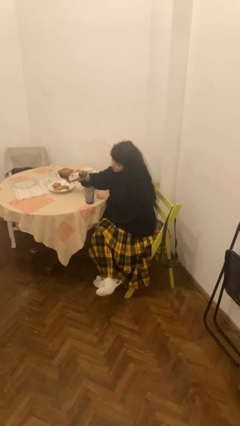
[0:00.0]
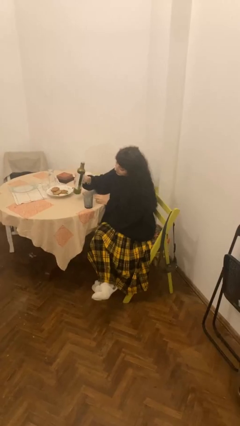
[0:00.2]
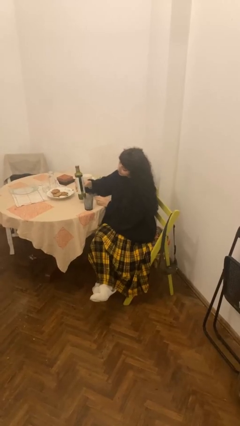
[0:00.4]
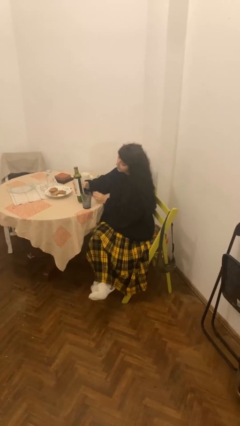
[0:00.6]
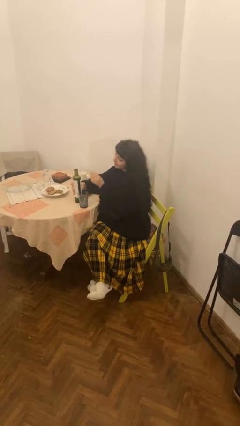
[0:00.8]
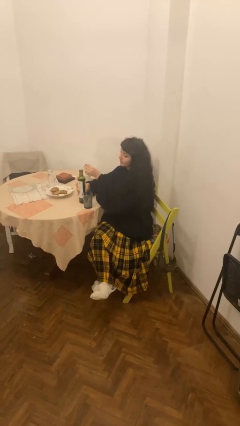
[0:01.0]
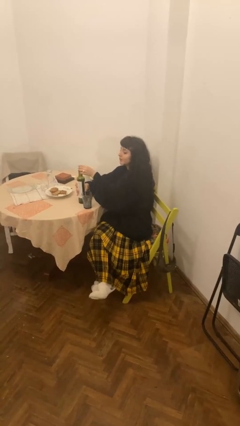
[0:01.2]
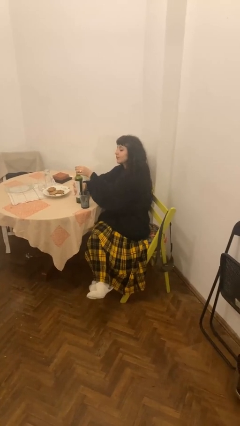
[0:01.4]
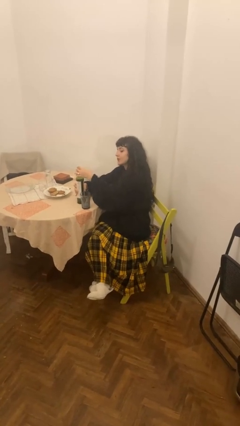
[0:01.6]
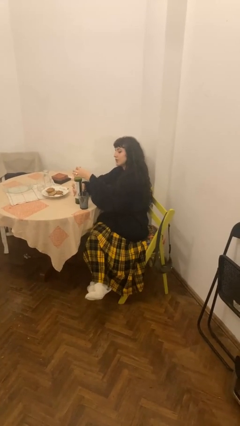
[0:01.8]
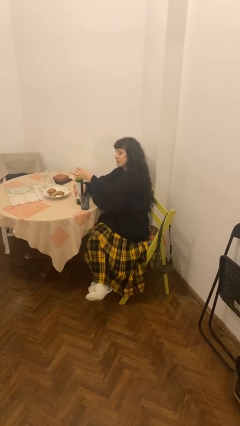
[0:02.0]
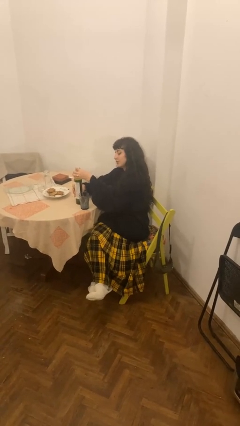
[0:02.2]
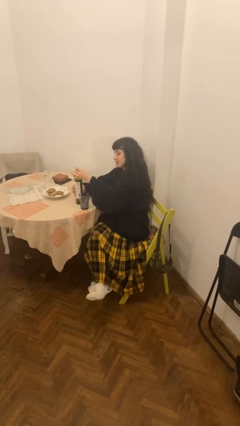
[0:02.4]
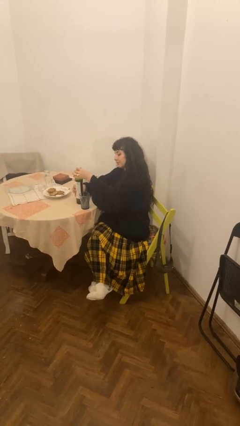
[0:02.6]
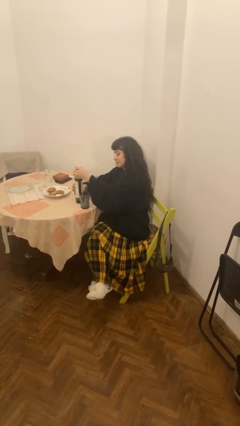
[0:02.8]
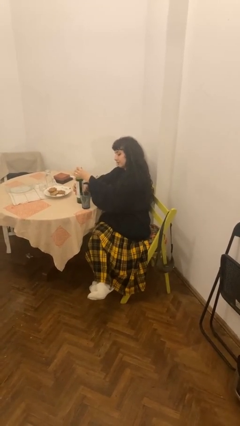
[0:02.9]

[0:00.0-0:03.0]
person screws lid to bottle

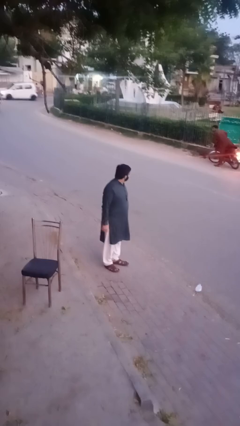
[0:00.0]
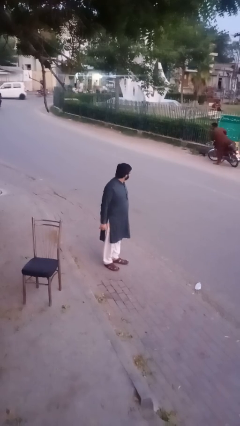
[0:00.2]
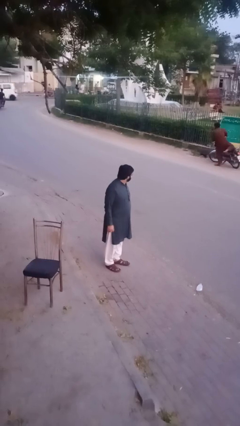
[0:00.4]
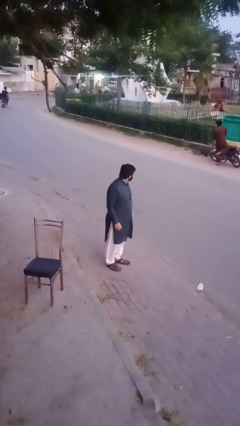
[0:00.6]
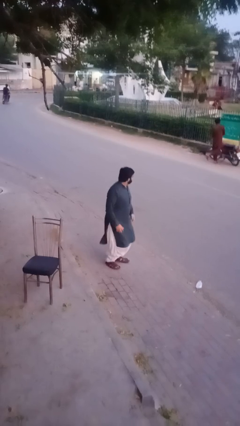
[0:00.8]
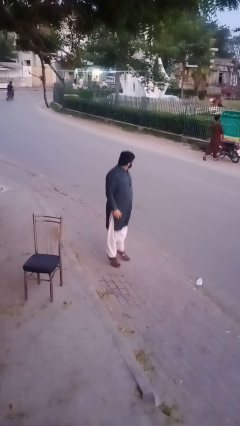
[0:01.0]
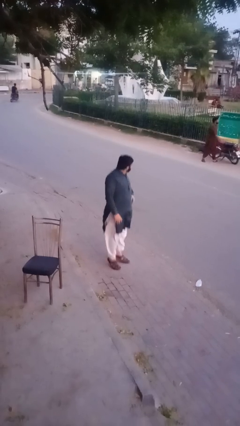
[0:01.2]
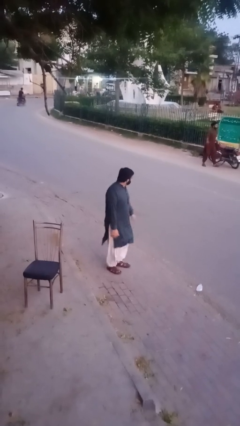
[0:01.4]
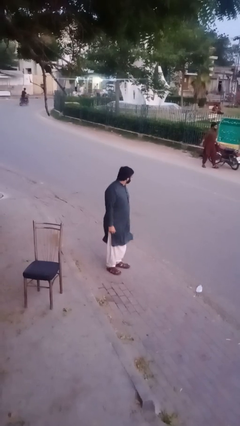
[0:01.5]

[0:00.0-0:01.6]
person jumps

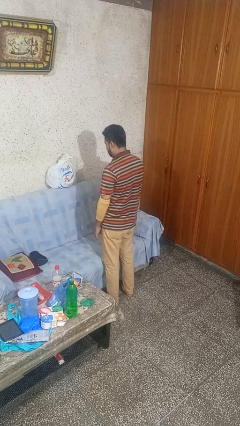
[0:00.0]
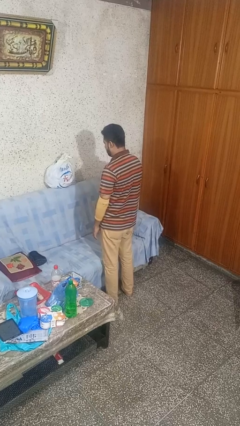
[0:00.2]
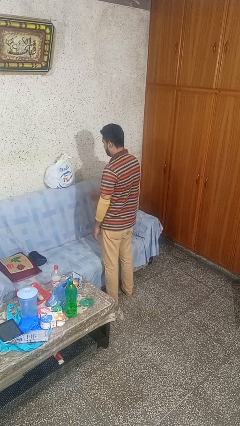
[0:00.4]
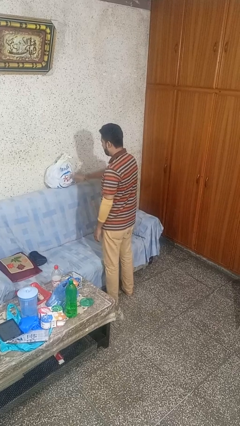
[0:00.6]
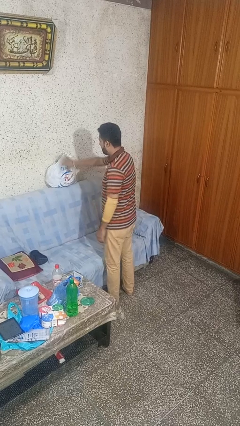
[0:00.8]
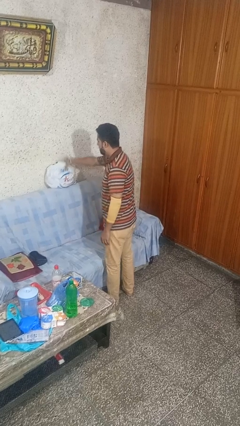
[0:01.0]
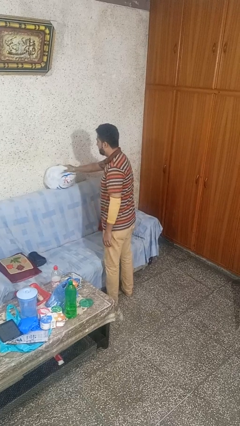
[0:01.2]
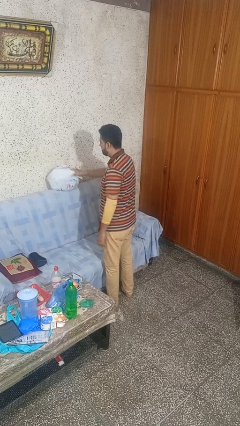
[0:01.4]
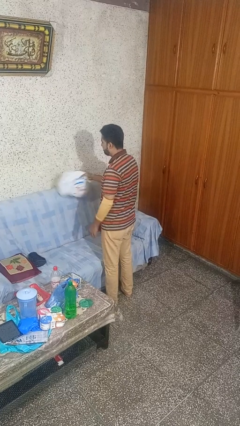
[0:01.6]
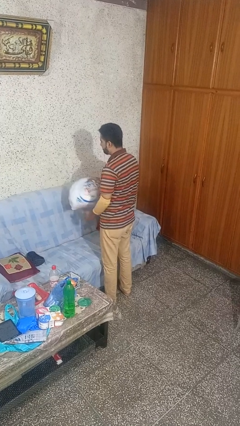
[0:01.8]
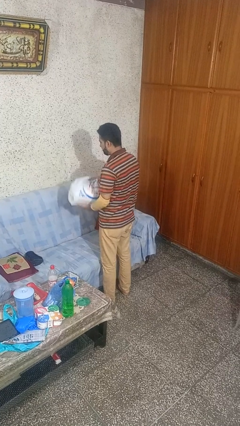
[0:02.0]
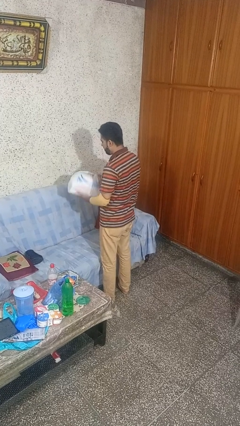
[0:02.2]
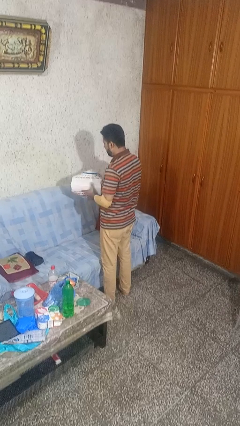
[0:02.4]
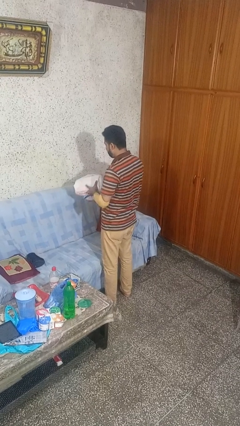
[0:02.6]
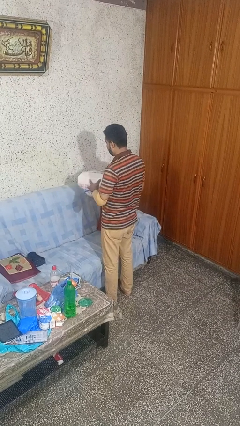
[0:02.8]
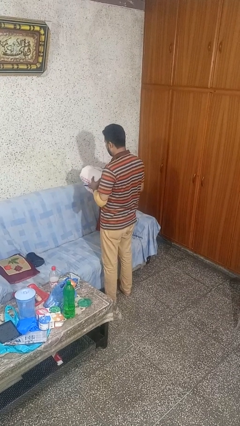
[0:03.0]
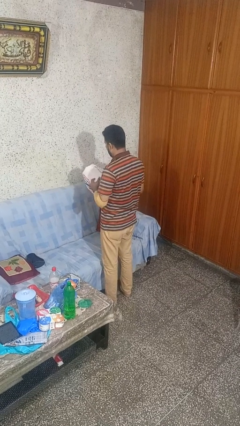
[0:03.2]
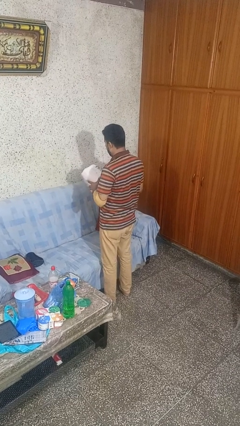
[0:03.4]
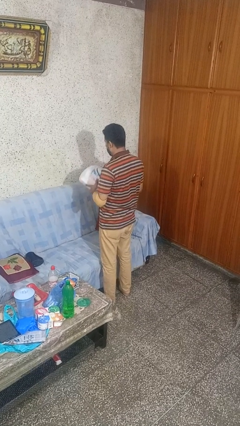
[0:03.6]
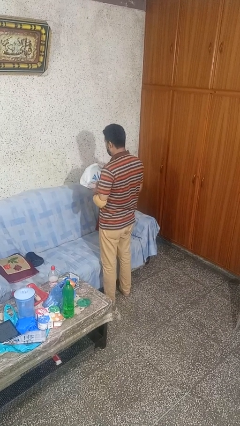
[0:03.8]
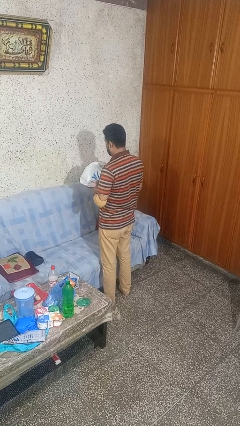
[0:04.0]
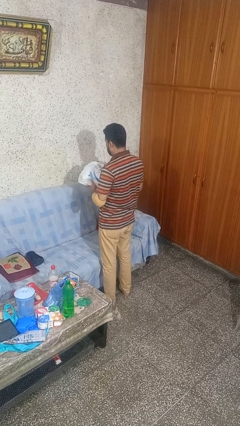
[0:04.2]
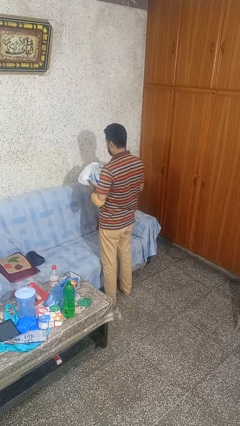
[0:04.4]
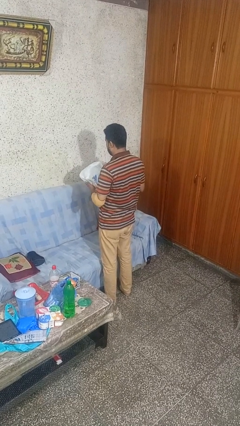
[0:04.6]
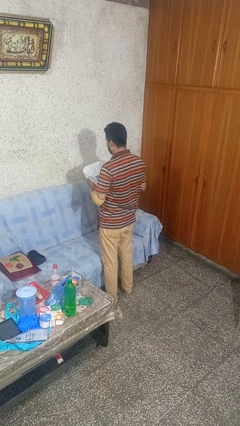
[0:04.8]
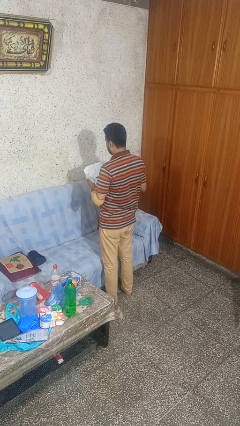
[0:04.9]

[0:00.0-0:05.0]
person picks up object from couch

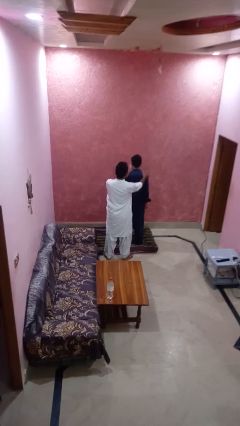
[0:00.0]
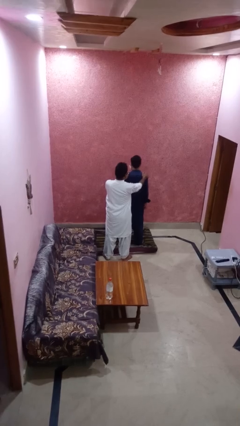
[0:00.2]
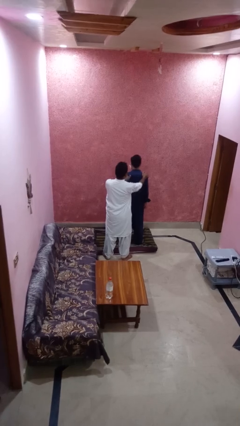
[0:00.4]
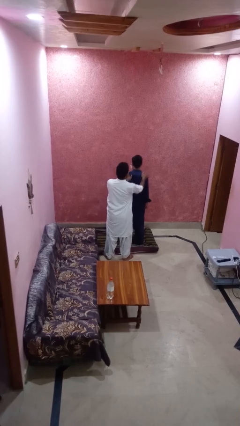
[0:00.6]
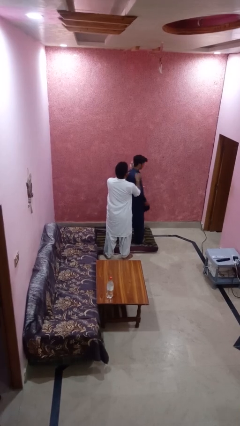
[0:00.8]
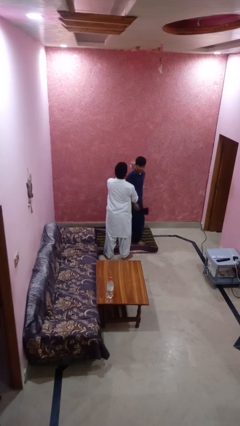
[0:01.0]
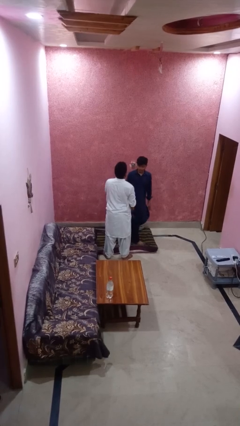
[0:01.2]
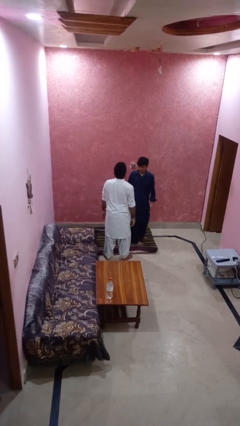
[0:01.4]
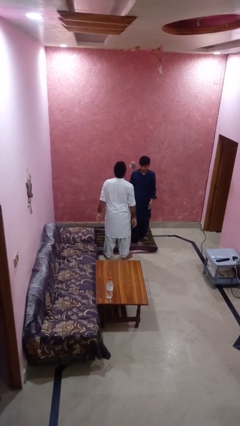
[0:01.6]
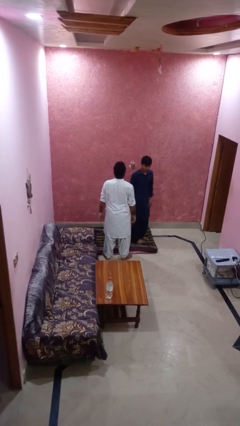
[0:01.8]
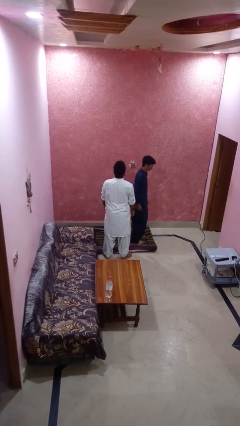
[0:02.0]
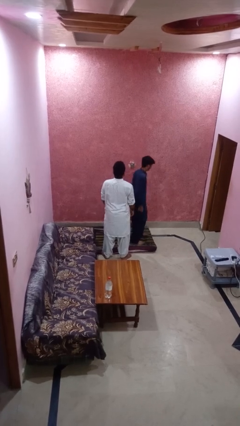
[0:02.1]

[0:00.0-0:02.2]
person spins person around

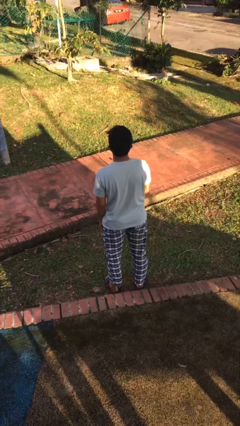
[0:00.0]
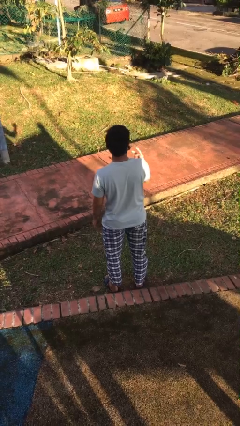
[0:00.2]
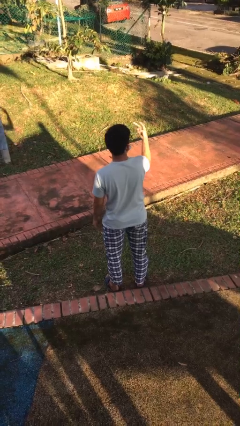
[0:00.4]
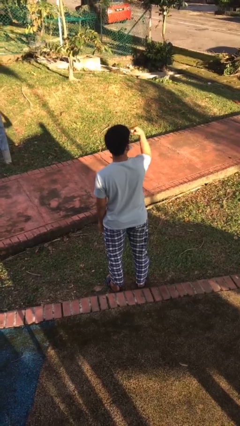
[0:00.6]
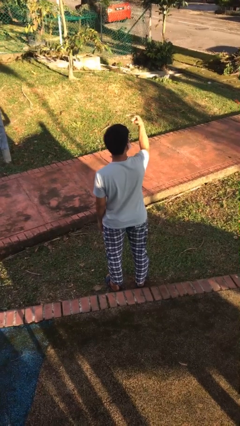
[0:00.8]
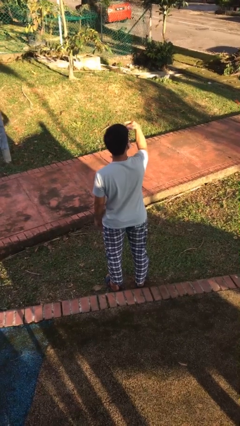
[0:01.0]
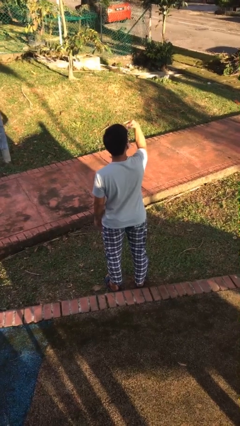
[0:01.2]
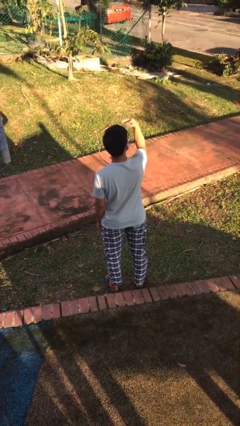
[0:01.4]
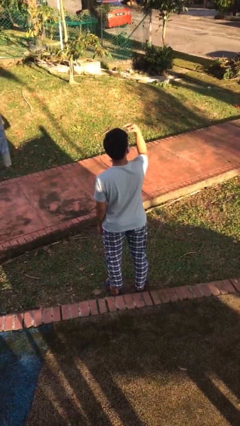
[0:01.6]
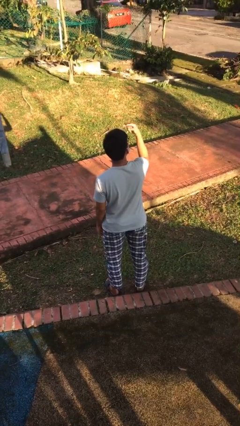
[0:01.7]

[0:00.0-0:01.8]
person gestures watch closely

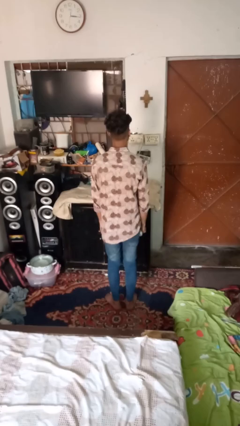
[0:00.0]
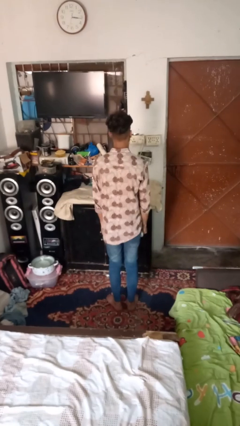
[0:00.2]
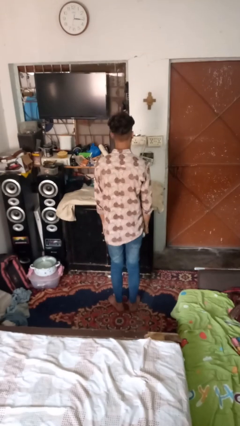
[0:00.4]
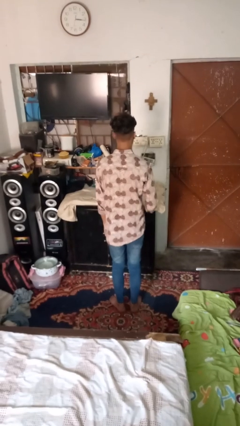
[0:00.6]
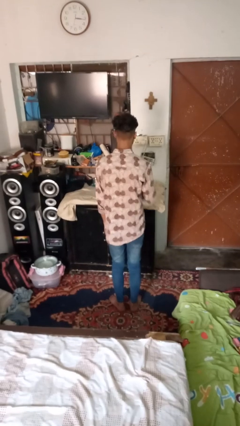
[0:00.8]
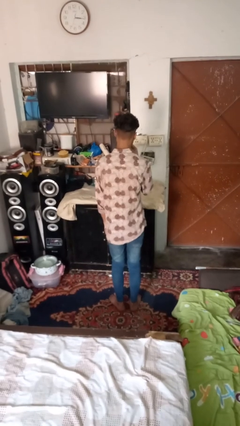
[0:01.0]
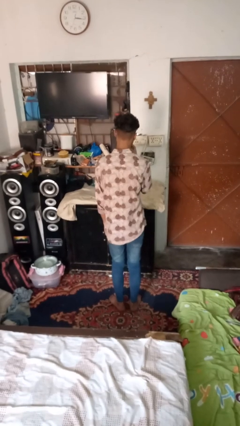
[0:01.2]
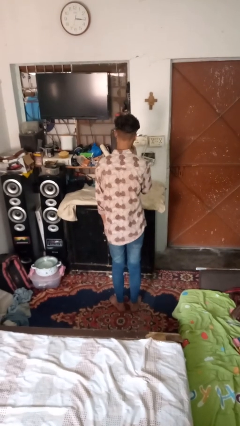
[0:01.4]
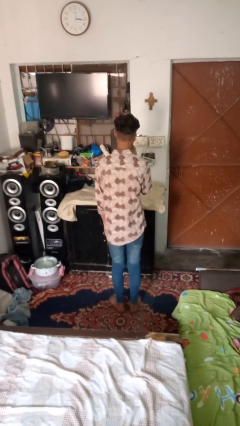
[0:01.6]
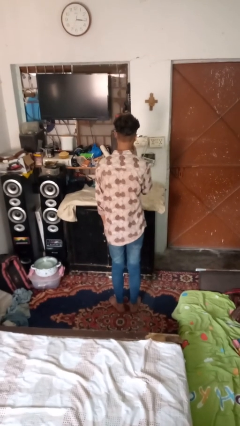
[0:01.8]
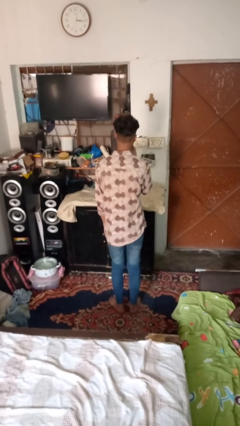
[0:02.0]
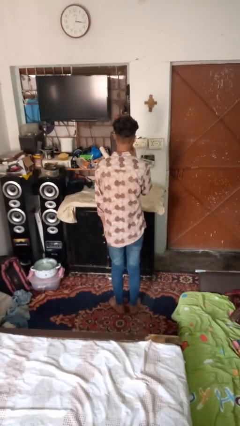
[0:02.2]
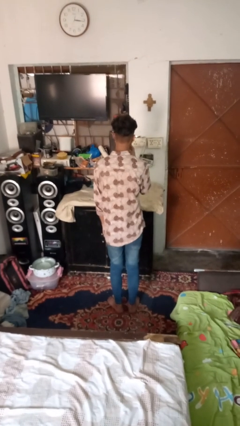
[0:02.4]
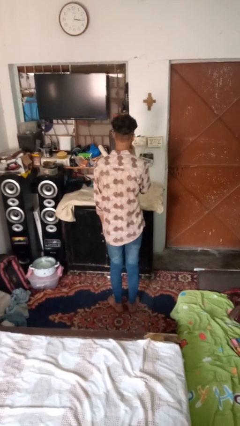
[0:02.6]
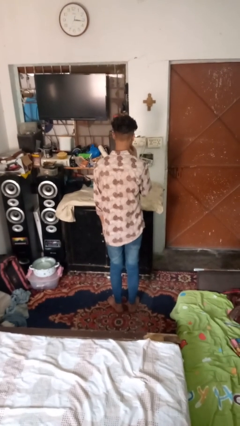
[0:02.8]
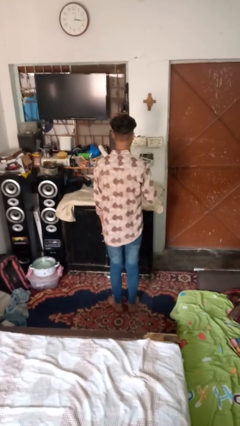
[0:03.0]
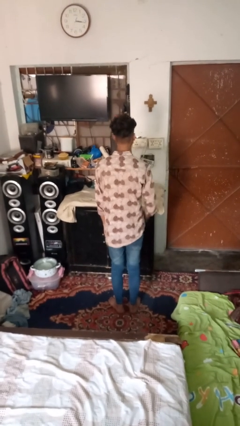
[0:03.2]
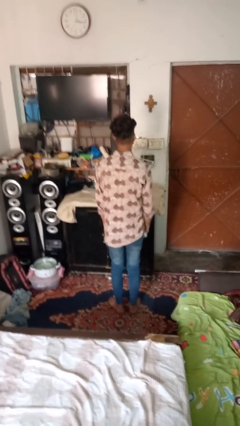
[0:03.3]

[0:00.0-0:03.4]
person vapes
